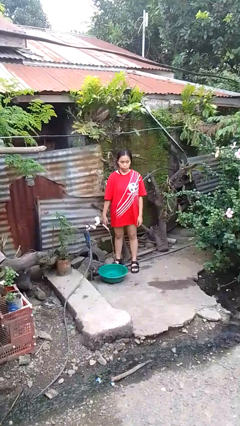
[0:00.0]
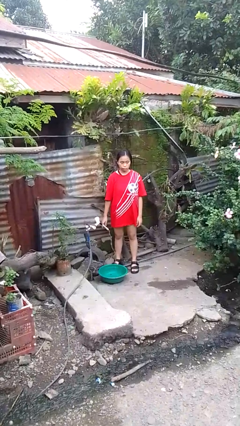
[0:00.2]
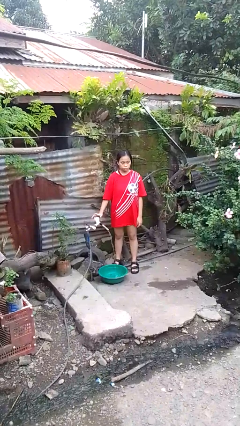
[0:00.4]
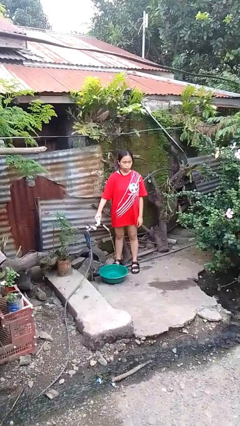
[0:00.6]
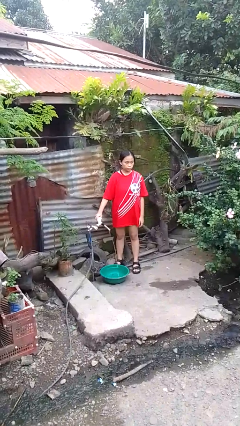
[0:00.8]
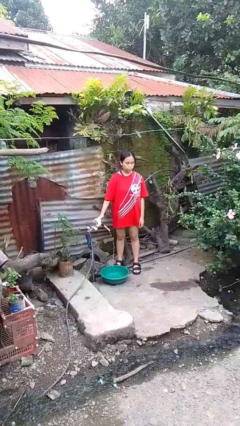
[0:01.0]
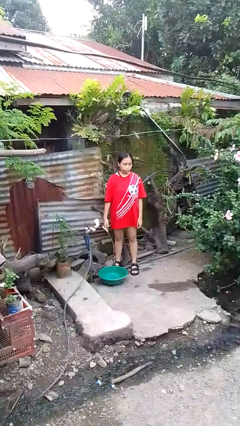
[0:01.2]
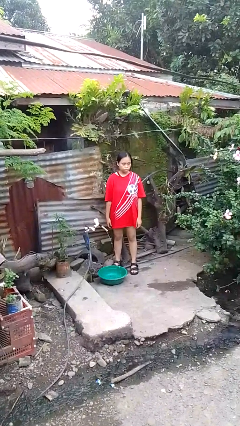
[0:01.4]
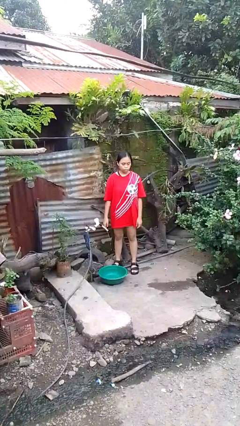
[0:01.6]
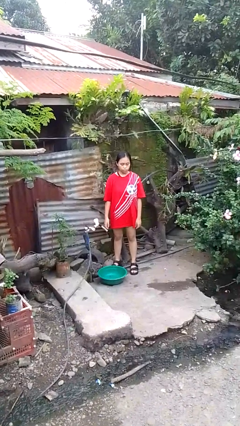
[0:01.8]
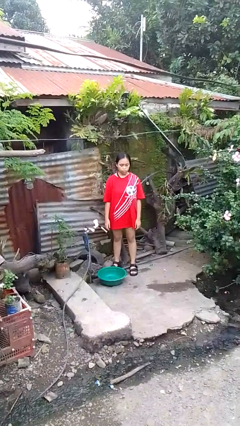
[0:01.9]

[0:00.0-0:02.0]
person turns off faucet

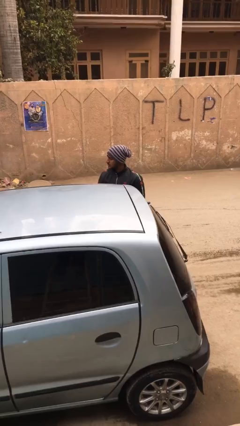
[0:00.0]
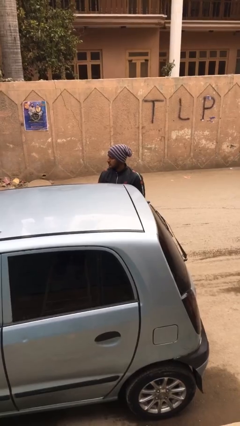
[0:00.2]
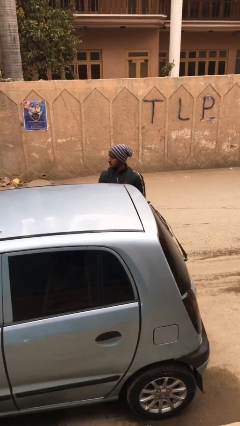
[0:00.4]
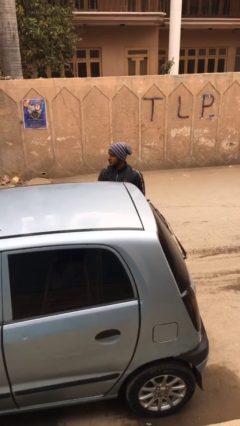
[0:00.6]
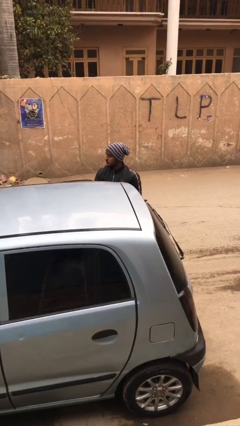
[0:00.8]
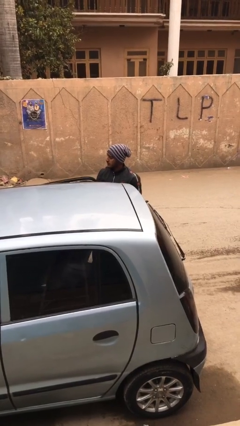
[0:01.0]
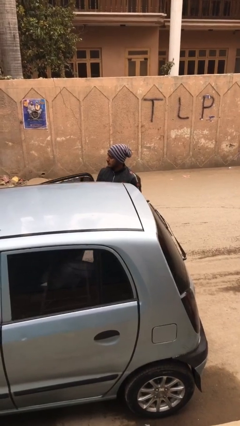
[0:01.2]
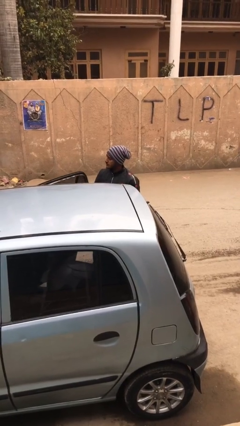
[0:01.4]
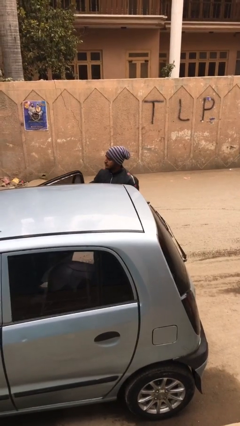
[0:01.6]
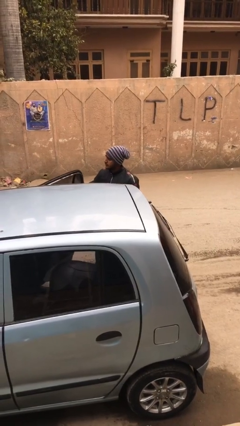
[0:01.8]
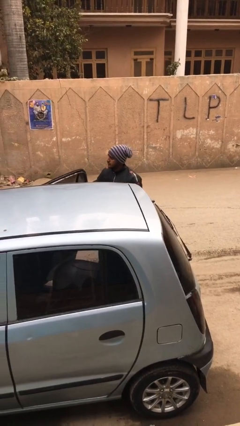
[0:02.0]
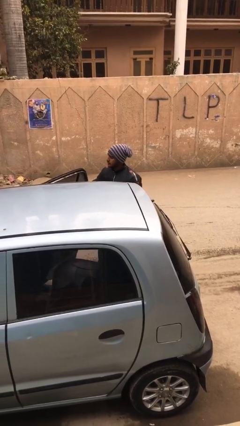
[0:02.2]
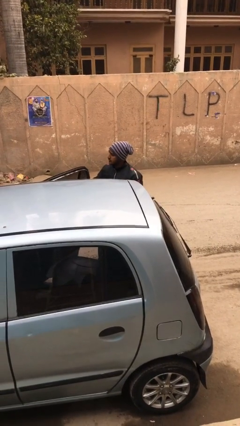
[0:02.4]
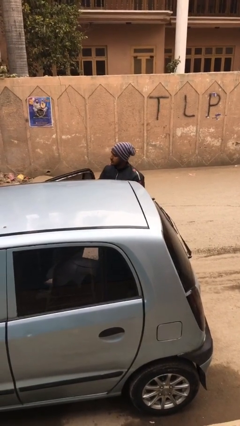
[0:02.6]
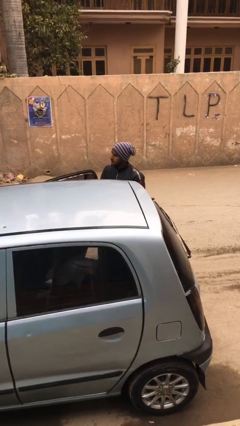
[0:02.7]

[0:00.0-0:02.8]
person opens car door

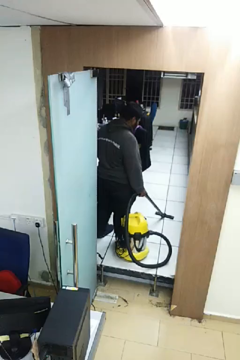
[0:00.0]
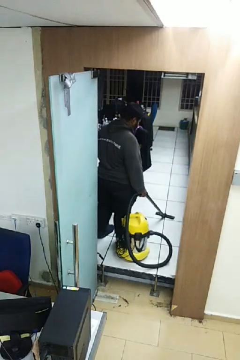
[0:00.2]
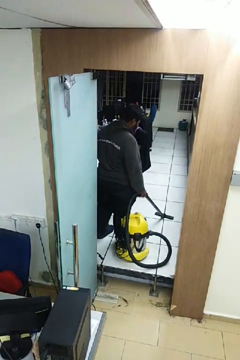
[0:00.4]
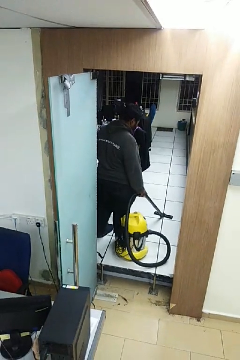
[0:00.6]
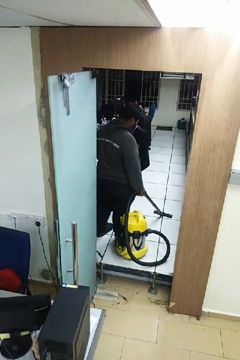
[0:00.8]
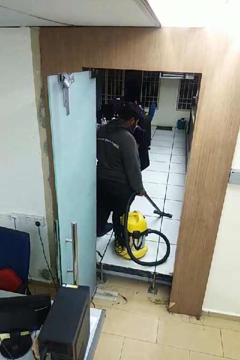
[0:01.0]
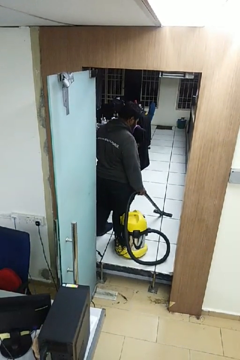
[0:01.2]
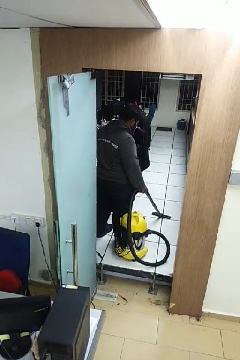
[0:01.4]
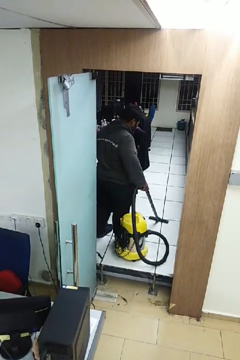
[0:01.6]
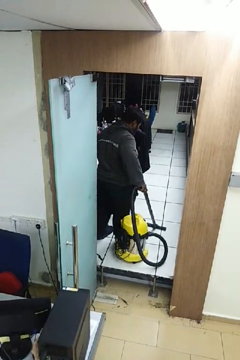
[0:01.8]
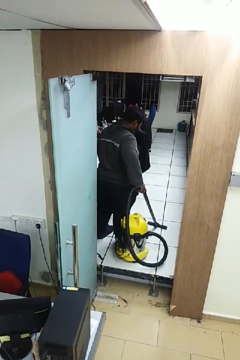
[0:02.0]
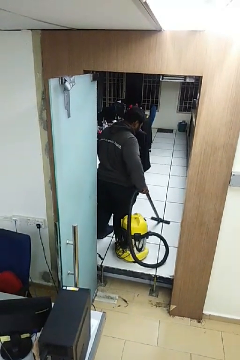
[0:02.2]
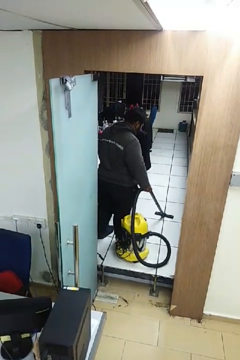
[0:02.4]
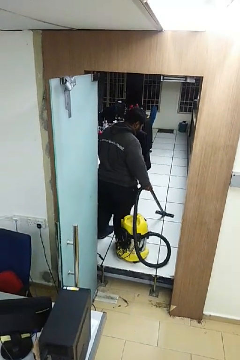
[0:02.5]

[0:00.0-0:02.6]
person vacuums carpet

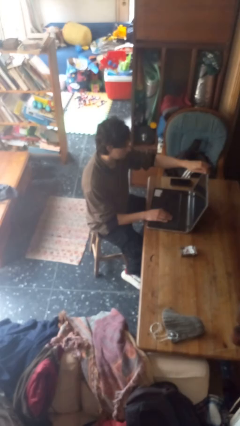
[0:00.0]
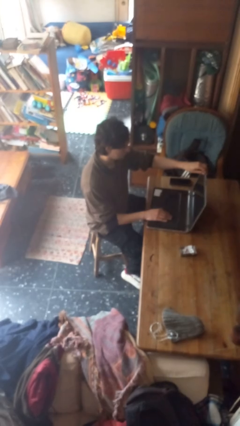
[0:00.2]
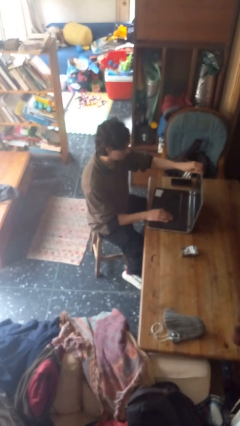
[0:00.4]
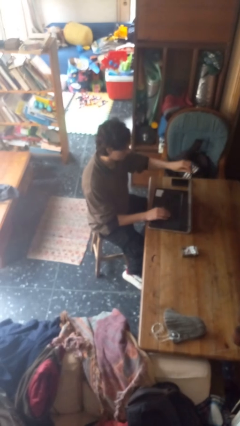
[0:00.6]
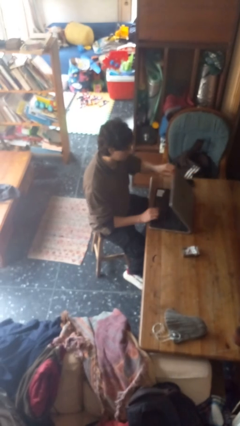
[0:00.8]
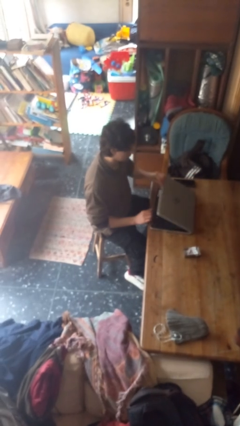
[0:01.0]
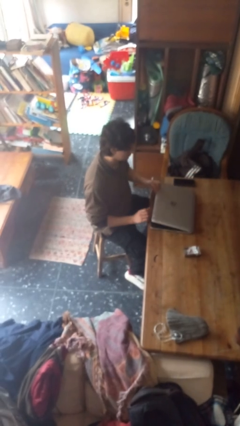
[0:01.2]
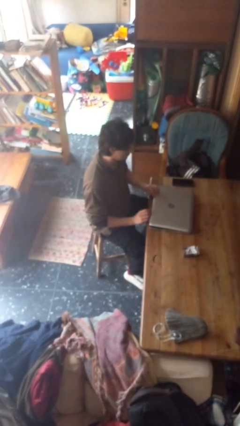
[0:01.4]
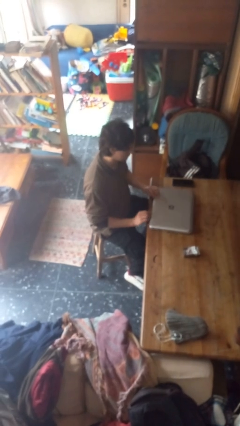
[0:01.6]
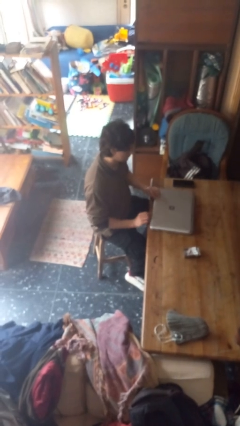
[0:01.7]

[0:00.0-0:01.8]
person closes laptop

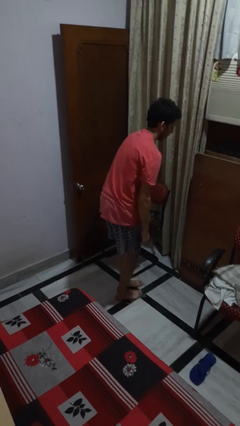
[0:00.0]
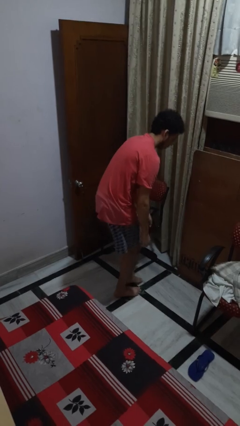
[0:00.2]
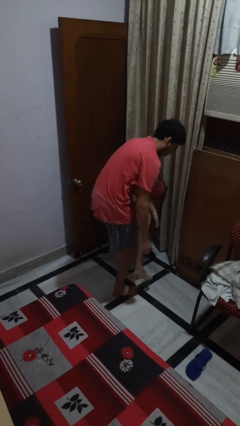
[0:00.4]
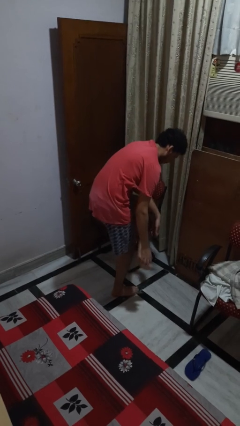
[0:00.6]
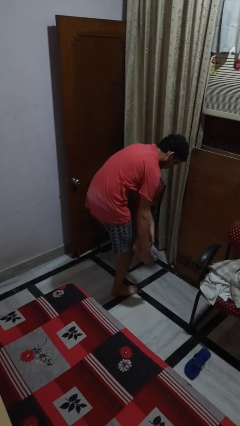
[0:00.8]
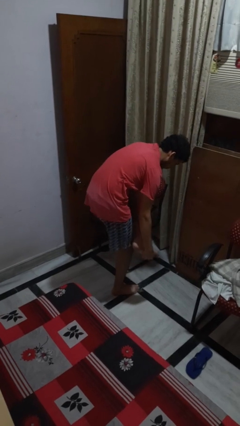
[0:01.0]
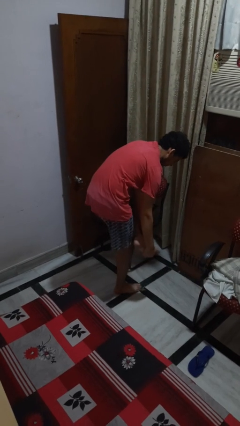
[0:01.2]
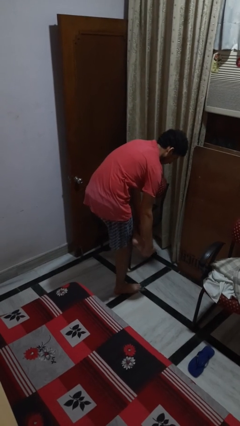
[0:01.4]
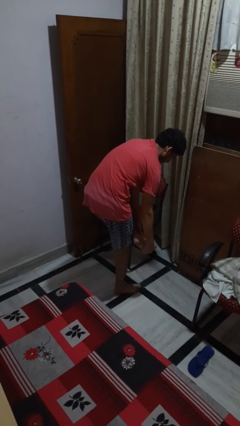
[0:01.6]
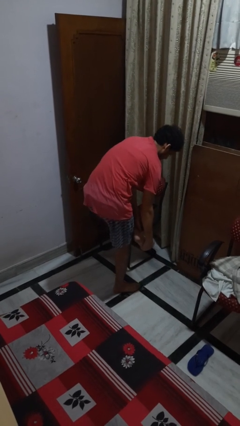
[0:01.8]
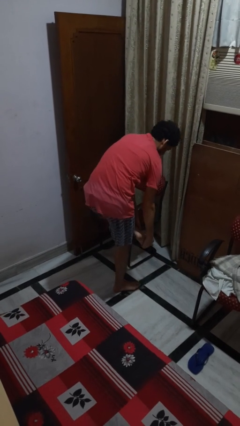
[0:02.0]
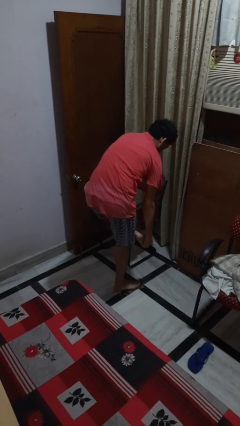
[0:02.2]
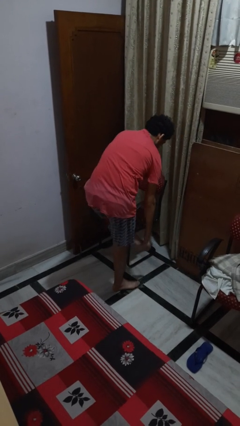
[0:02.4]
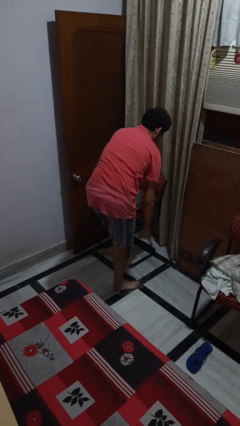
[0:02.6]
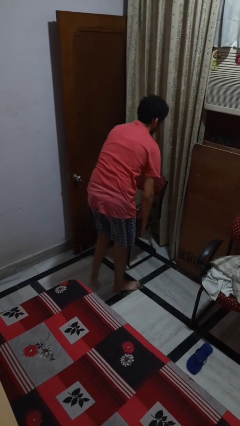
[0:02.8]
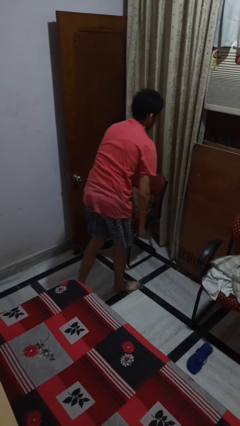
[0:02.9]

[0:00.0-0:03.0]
person stubs toe

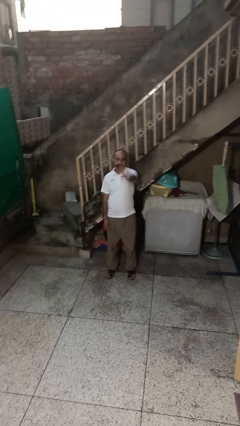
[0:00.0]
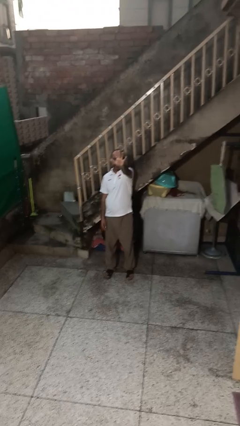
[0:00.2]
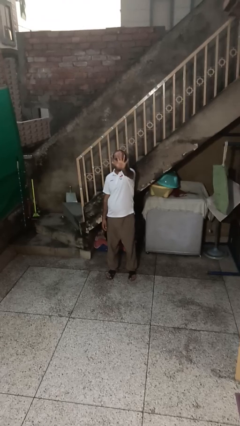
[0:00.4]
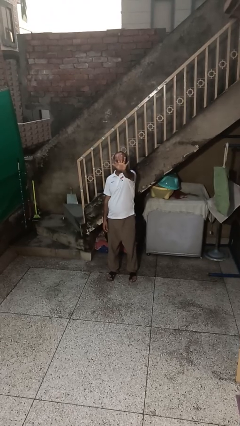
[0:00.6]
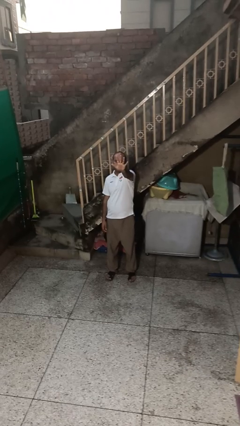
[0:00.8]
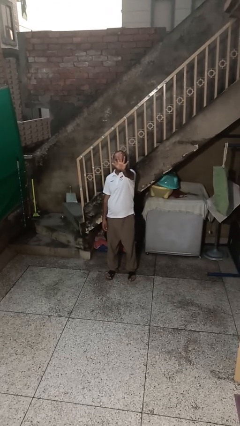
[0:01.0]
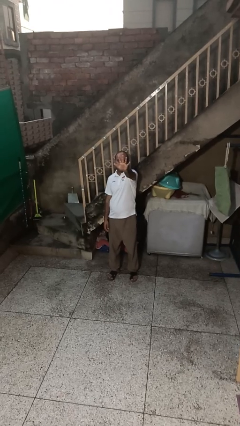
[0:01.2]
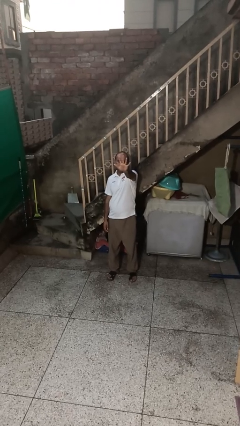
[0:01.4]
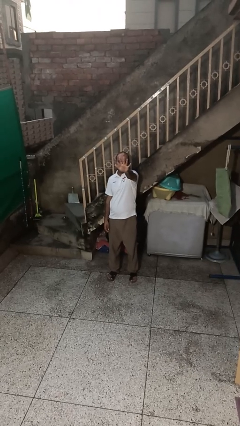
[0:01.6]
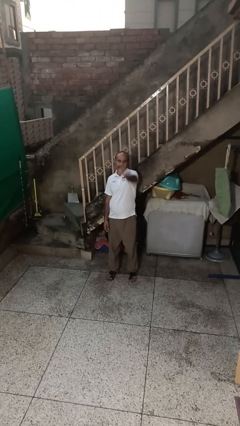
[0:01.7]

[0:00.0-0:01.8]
person gestures number five

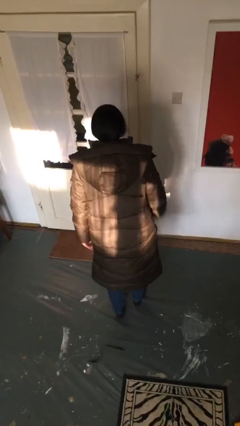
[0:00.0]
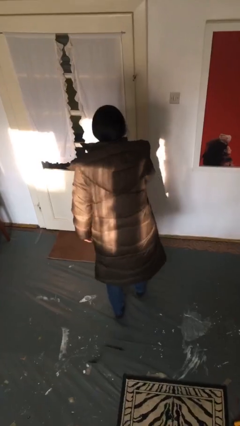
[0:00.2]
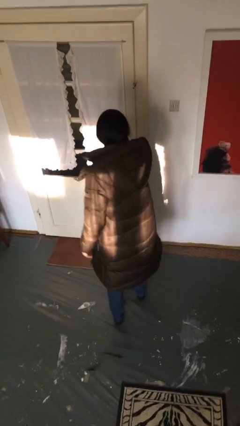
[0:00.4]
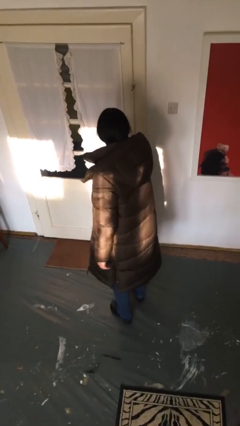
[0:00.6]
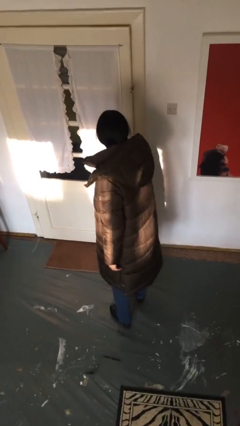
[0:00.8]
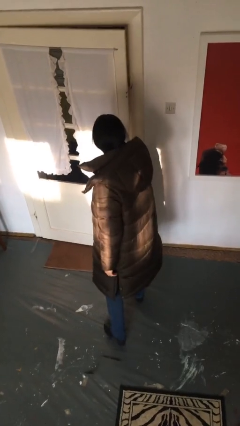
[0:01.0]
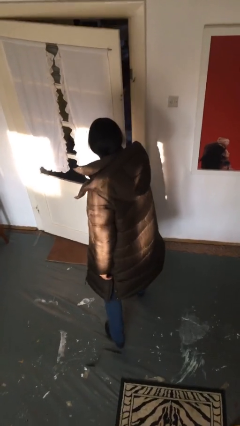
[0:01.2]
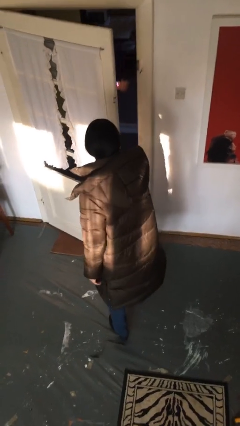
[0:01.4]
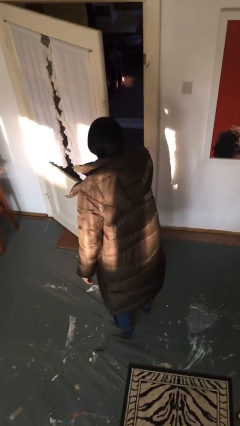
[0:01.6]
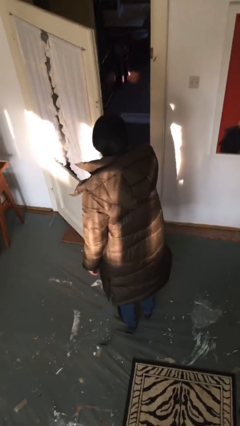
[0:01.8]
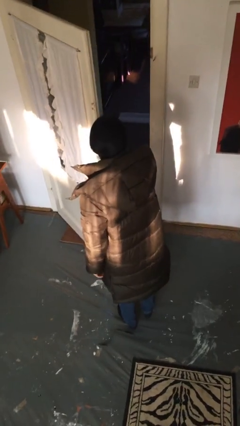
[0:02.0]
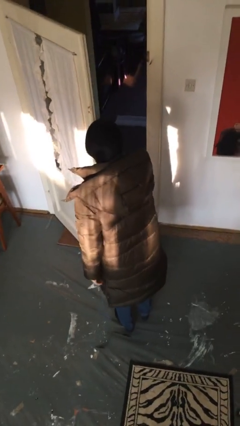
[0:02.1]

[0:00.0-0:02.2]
person opens facility door

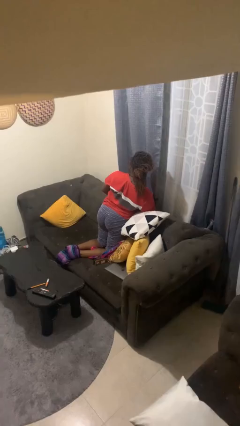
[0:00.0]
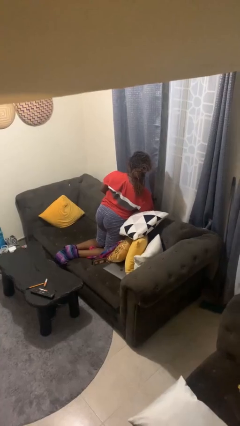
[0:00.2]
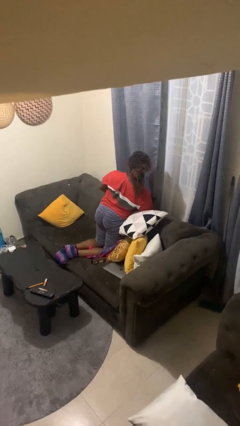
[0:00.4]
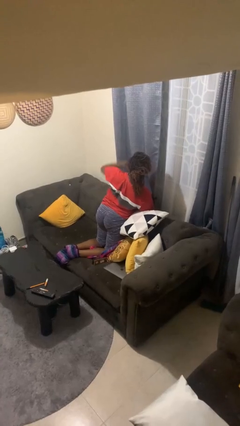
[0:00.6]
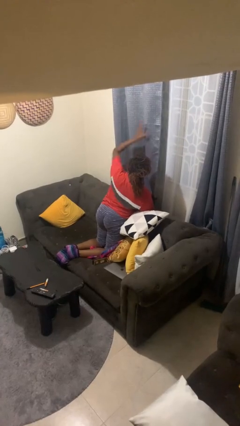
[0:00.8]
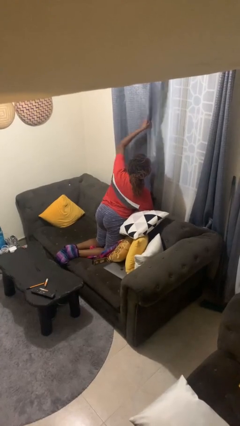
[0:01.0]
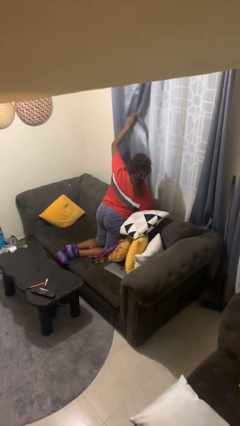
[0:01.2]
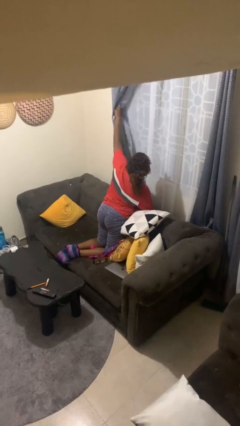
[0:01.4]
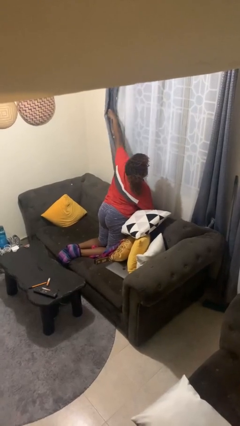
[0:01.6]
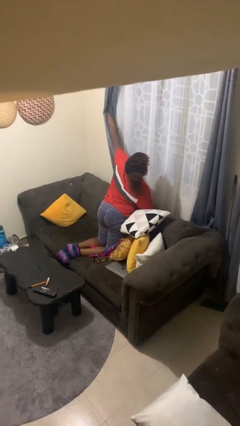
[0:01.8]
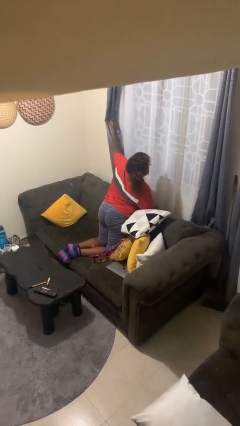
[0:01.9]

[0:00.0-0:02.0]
person opens curtains
